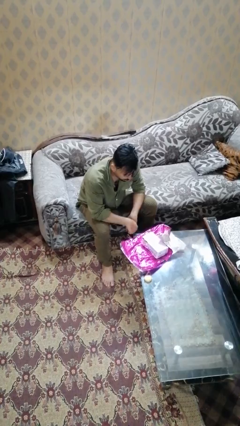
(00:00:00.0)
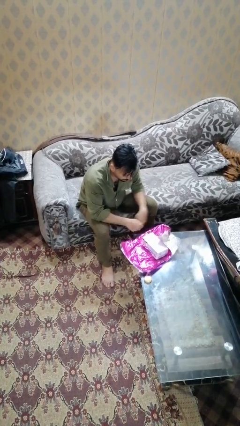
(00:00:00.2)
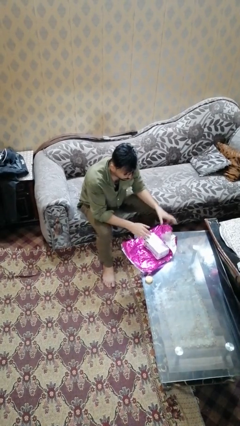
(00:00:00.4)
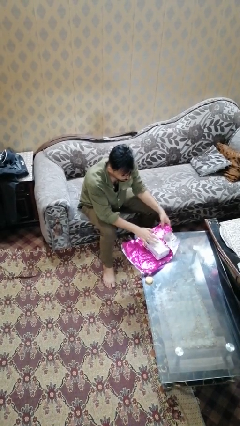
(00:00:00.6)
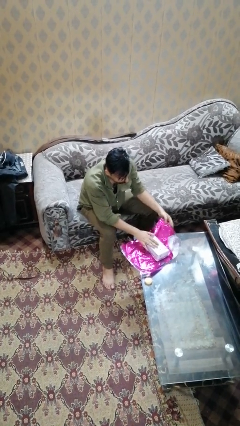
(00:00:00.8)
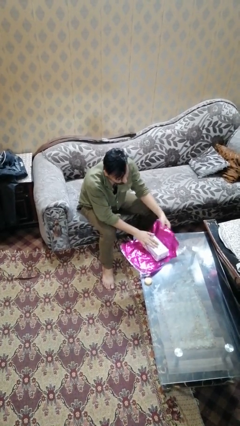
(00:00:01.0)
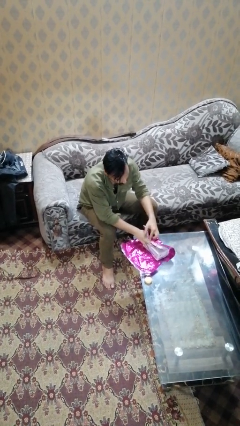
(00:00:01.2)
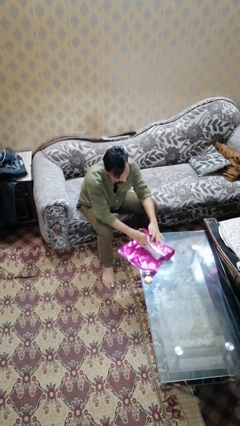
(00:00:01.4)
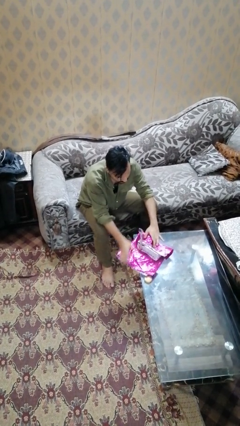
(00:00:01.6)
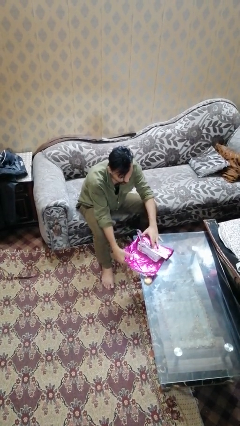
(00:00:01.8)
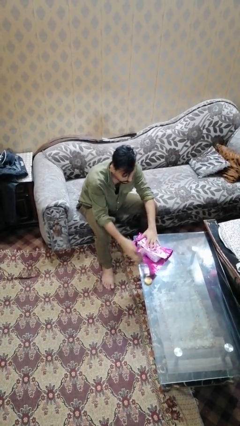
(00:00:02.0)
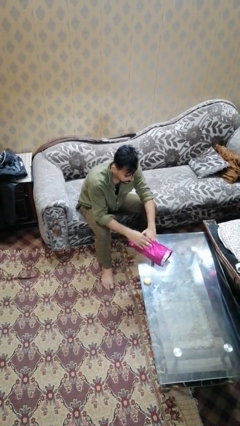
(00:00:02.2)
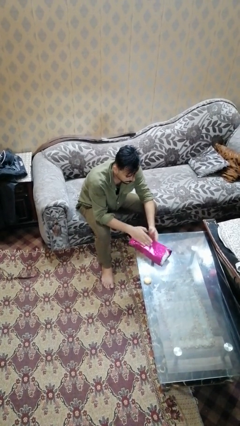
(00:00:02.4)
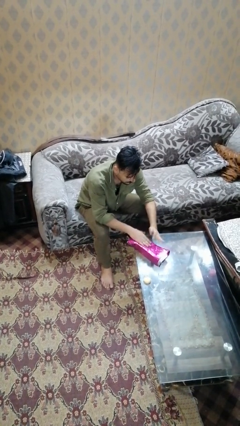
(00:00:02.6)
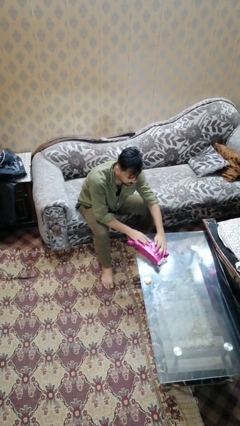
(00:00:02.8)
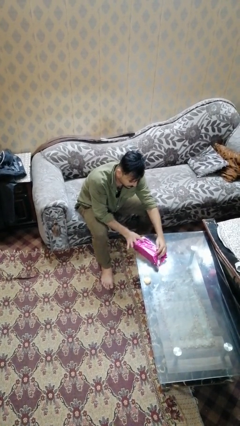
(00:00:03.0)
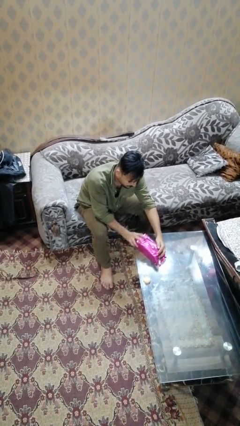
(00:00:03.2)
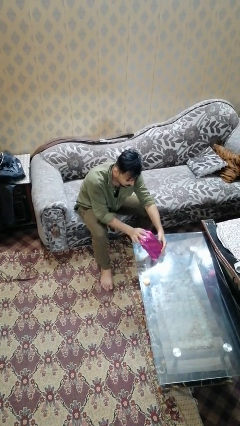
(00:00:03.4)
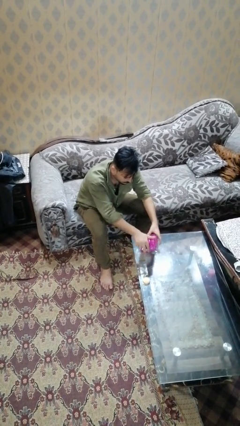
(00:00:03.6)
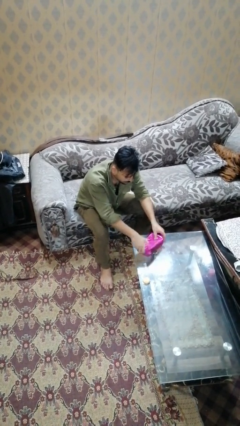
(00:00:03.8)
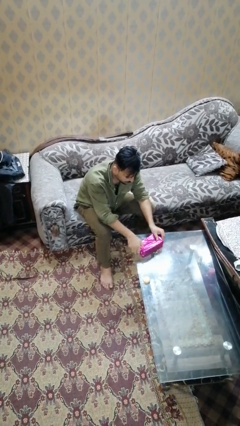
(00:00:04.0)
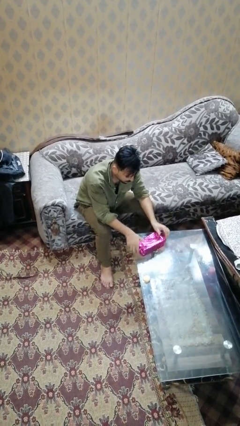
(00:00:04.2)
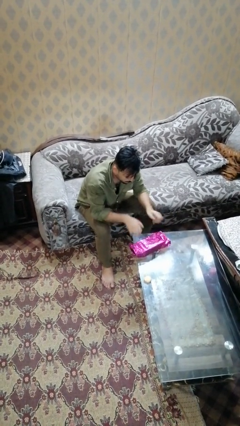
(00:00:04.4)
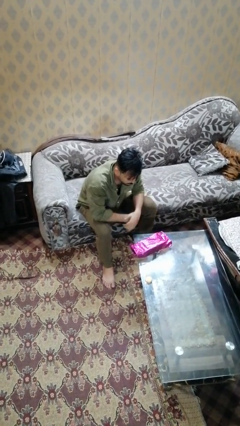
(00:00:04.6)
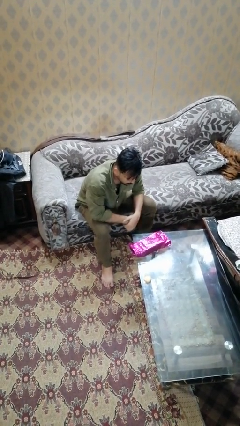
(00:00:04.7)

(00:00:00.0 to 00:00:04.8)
person wraps box

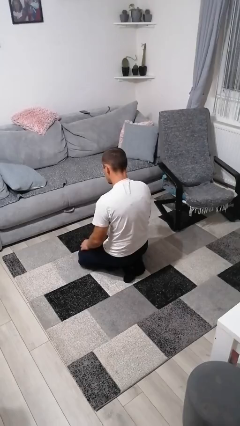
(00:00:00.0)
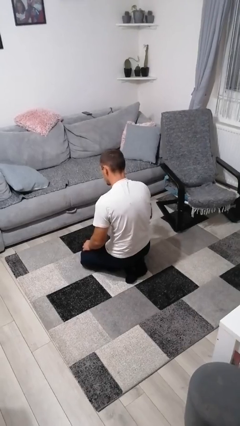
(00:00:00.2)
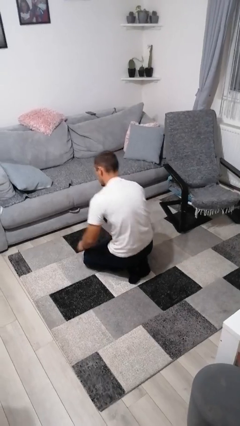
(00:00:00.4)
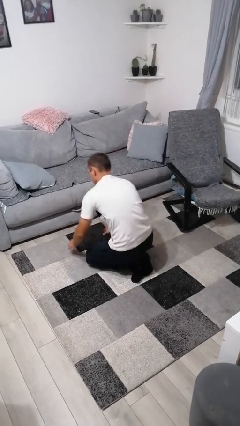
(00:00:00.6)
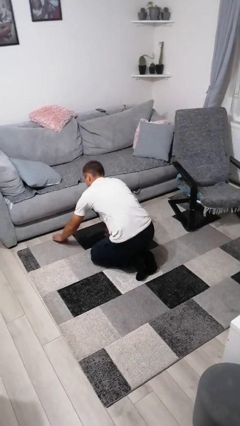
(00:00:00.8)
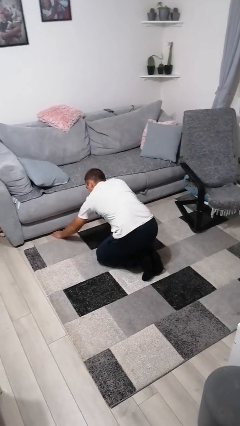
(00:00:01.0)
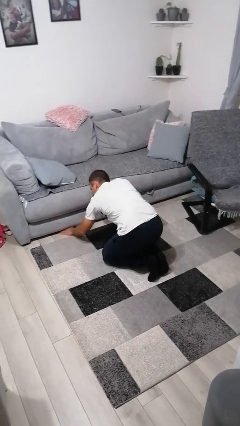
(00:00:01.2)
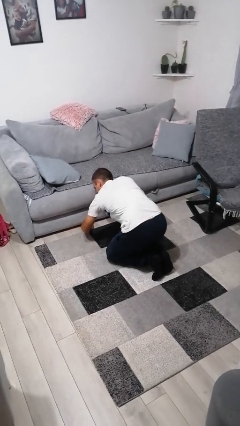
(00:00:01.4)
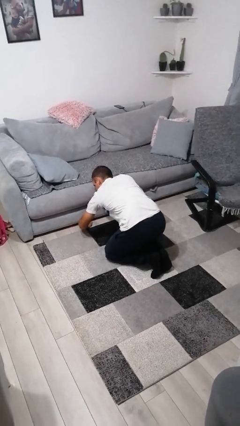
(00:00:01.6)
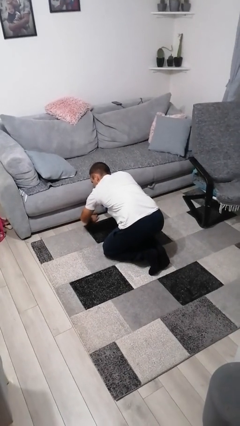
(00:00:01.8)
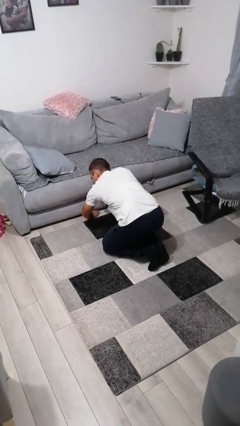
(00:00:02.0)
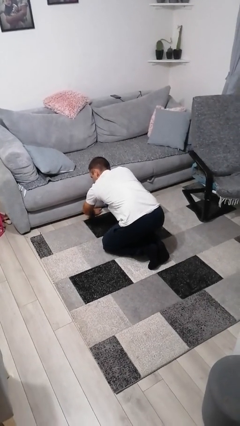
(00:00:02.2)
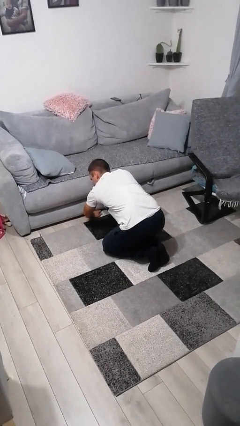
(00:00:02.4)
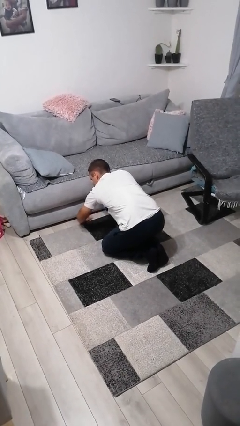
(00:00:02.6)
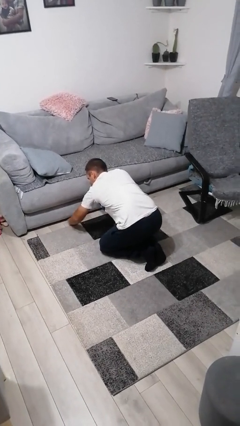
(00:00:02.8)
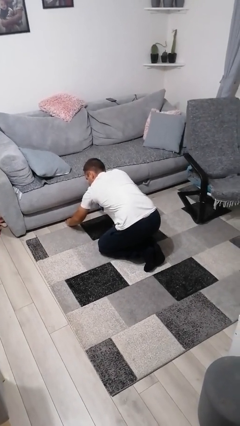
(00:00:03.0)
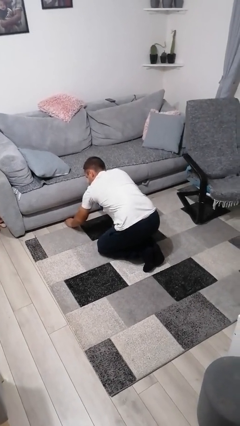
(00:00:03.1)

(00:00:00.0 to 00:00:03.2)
person searches under couch

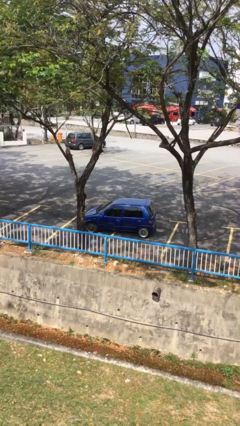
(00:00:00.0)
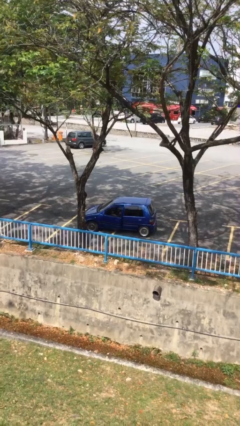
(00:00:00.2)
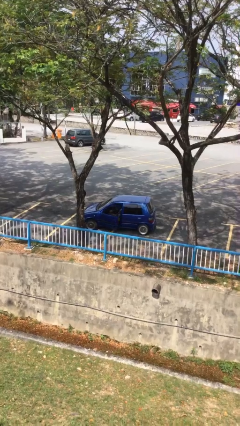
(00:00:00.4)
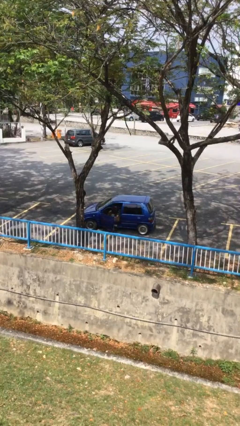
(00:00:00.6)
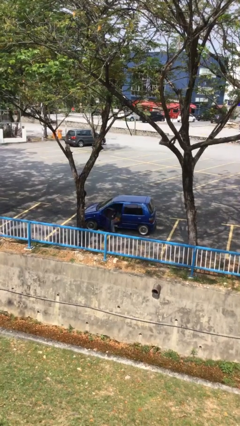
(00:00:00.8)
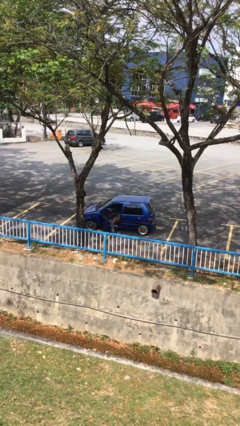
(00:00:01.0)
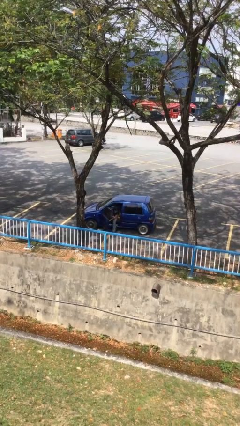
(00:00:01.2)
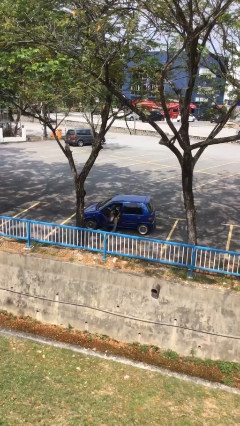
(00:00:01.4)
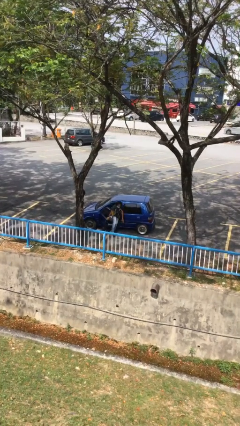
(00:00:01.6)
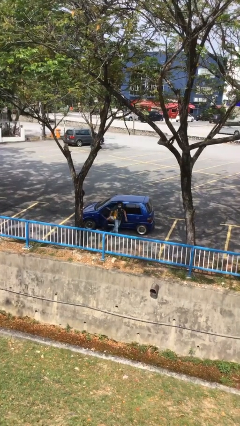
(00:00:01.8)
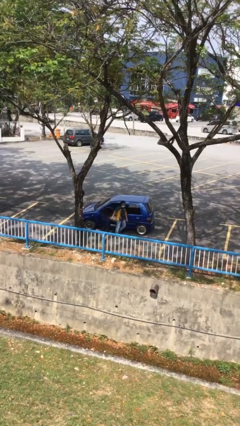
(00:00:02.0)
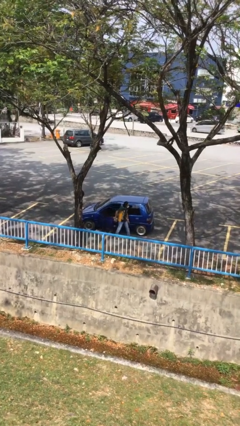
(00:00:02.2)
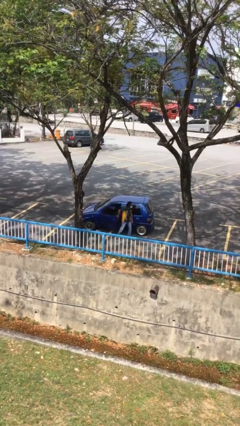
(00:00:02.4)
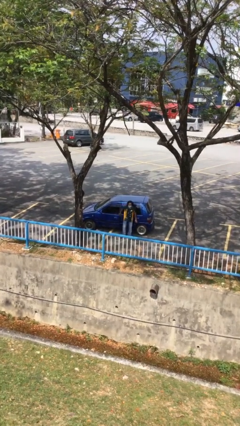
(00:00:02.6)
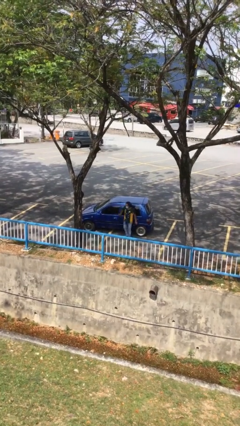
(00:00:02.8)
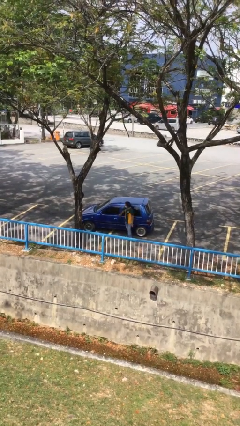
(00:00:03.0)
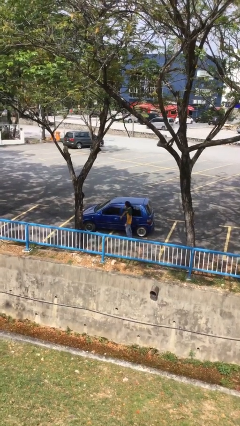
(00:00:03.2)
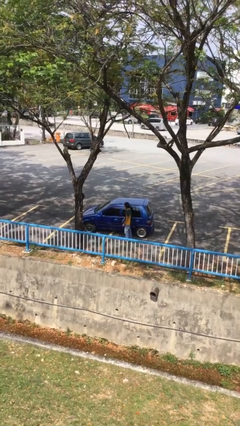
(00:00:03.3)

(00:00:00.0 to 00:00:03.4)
car drops off person

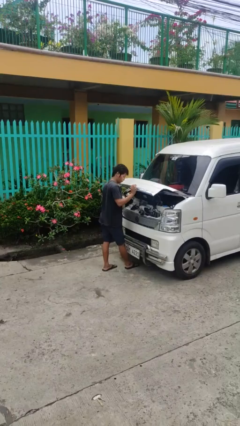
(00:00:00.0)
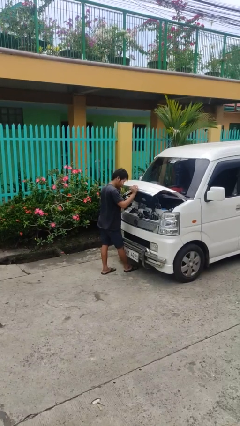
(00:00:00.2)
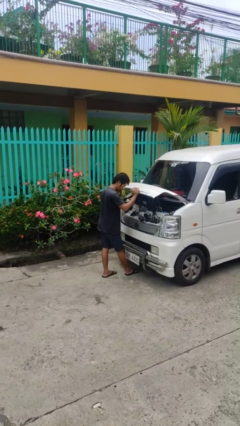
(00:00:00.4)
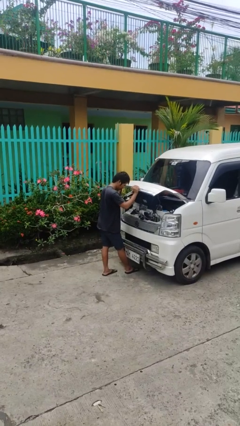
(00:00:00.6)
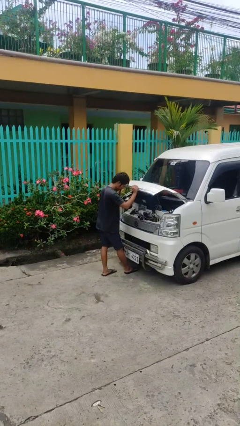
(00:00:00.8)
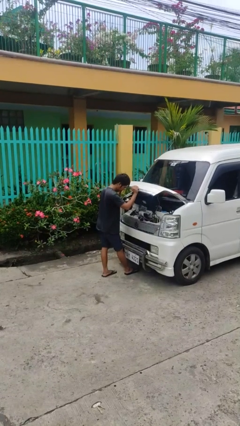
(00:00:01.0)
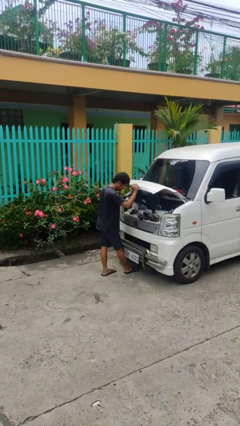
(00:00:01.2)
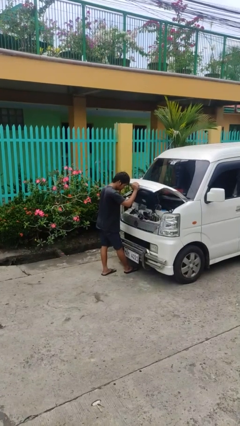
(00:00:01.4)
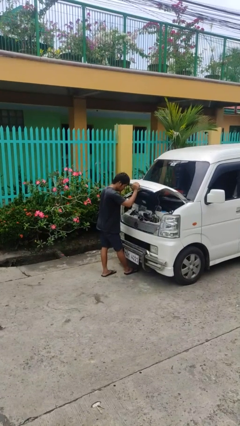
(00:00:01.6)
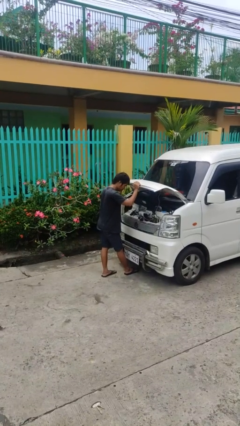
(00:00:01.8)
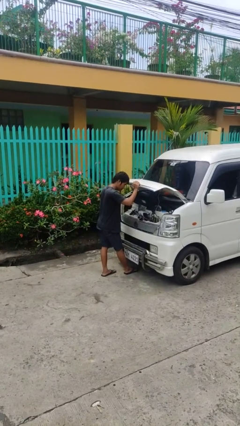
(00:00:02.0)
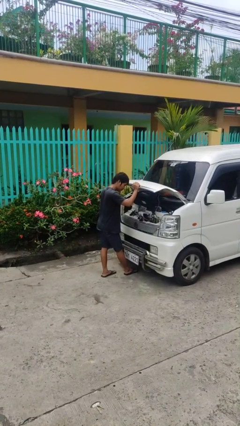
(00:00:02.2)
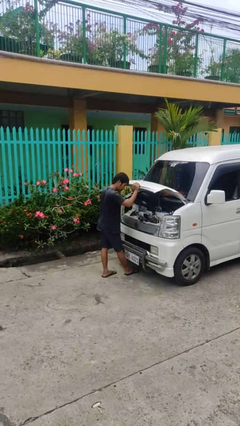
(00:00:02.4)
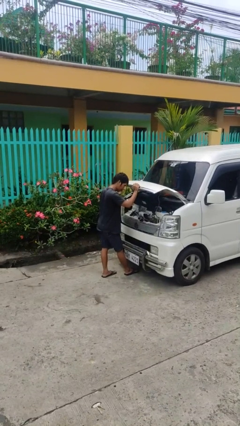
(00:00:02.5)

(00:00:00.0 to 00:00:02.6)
person opens car hood

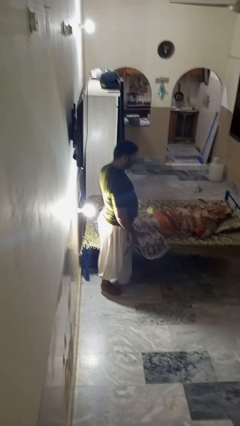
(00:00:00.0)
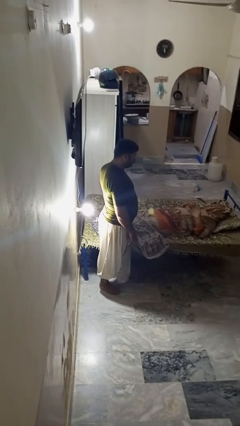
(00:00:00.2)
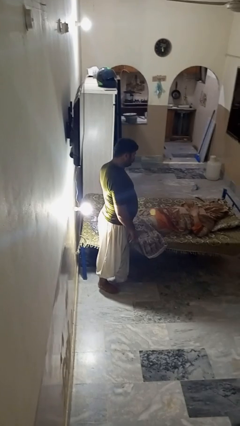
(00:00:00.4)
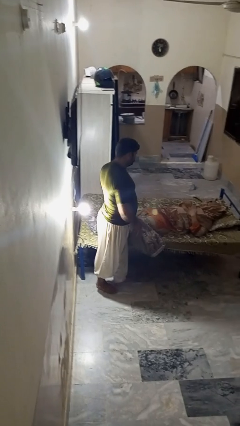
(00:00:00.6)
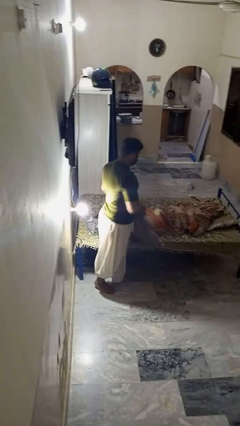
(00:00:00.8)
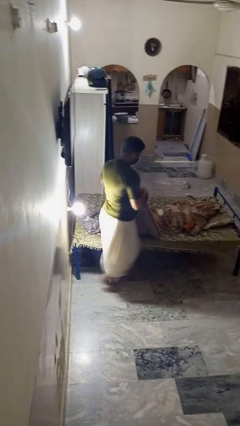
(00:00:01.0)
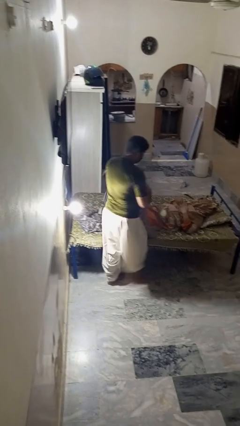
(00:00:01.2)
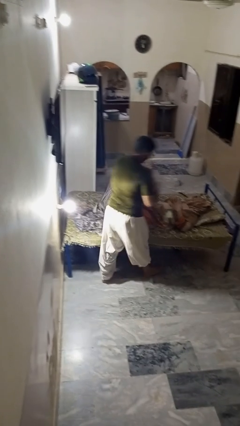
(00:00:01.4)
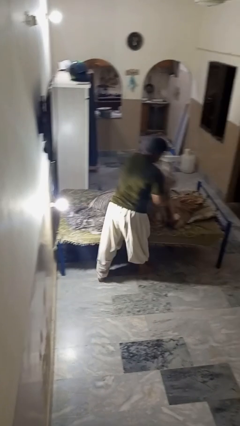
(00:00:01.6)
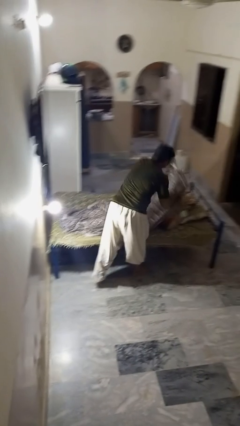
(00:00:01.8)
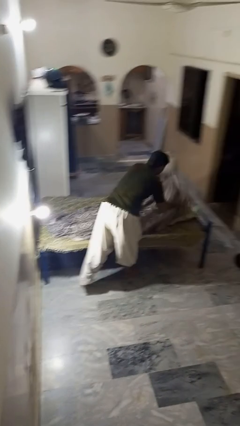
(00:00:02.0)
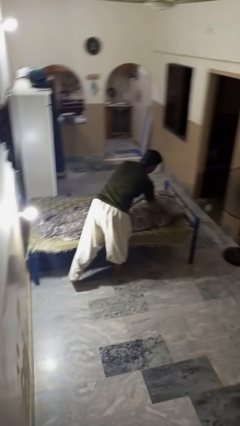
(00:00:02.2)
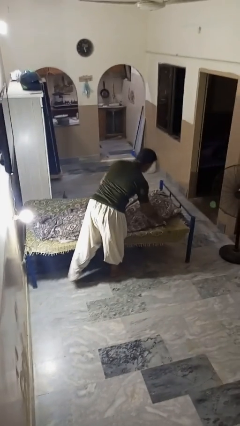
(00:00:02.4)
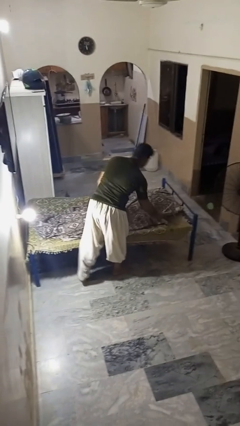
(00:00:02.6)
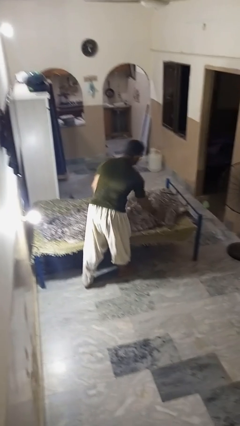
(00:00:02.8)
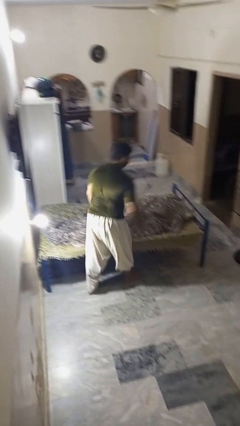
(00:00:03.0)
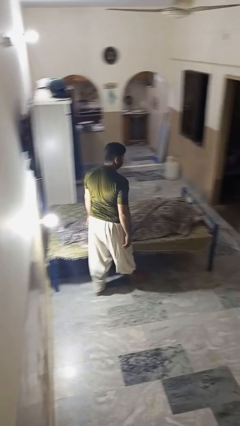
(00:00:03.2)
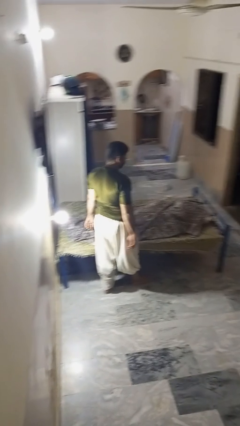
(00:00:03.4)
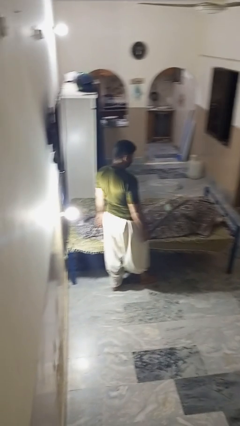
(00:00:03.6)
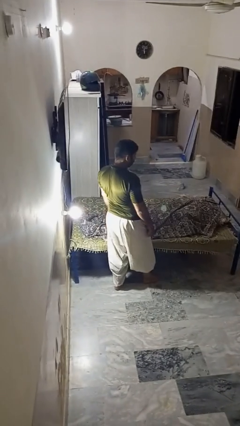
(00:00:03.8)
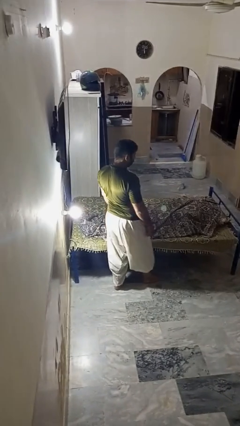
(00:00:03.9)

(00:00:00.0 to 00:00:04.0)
person covers friend with blanket
